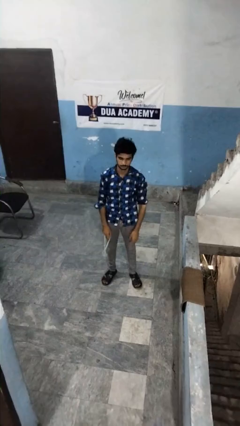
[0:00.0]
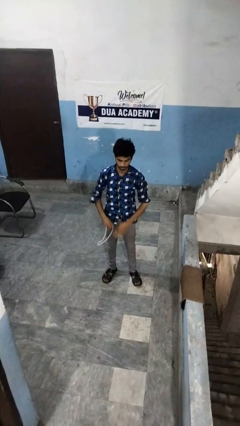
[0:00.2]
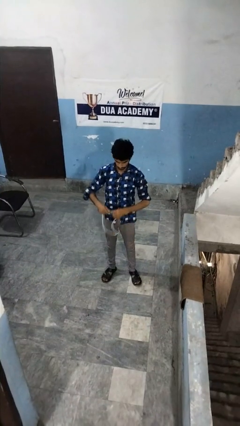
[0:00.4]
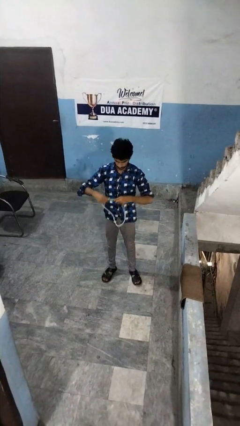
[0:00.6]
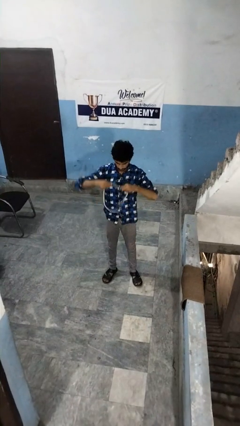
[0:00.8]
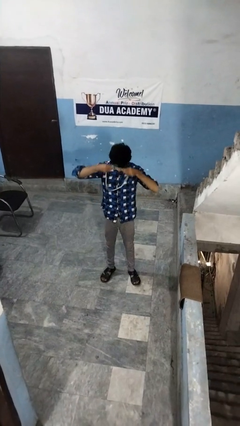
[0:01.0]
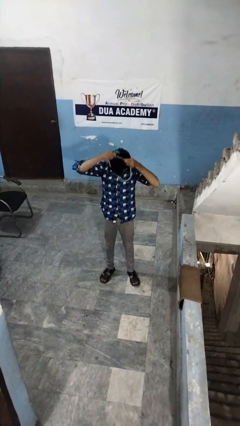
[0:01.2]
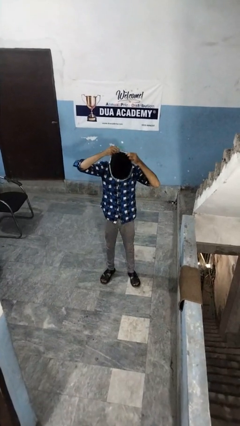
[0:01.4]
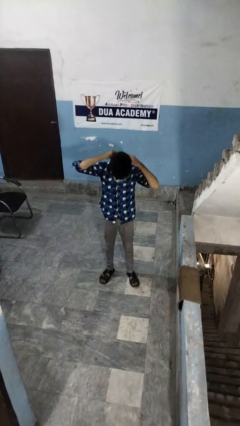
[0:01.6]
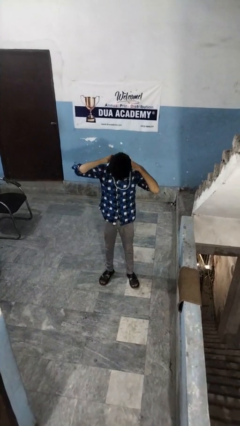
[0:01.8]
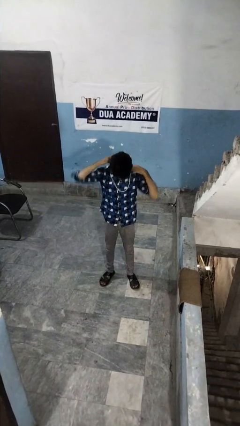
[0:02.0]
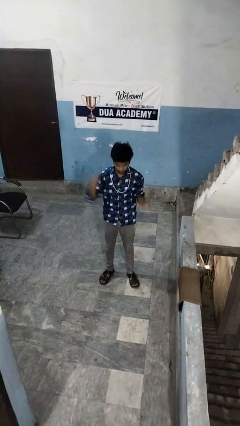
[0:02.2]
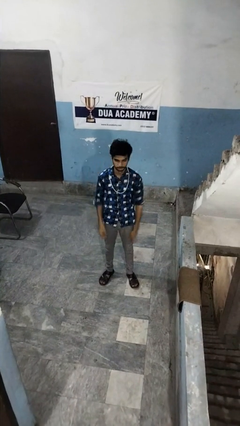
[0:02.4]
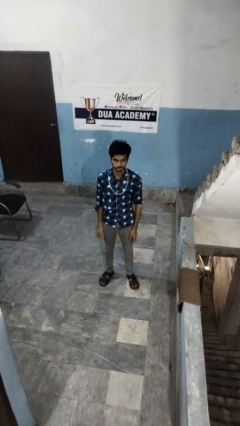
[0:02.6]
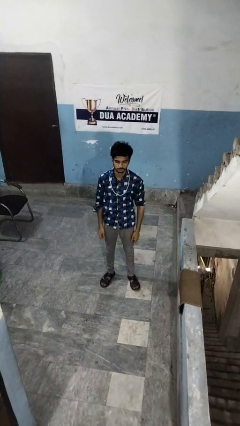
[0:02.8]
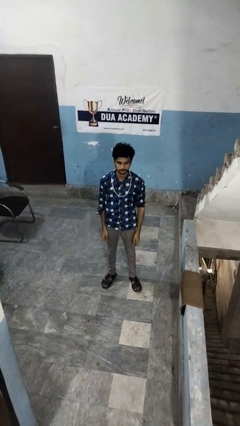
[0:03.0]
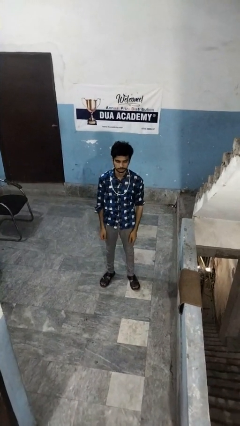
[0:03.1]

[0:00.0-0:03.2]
person puts on necklace

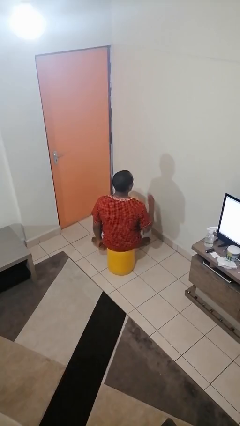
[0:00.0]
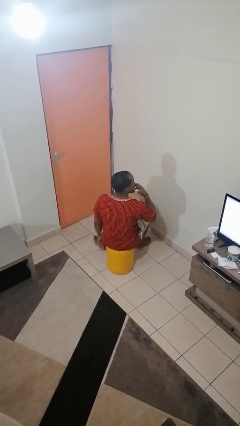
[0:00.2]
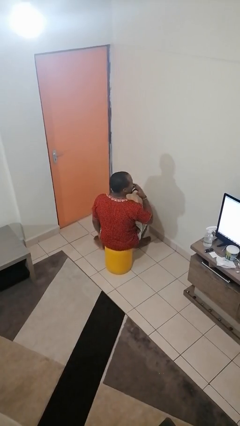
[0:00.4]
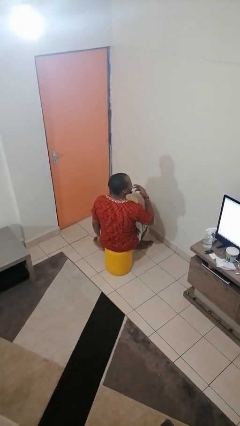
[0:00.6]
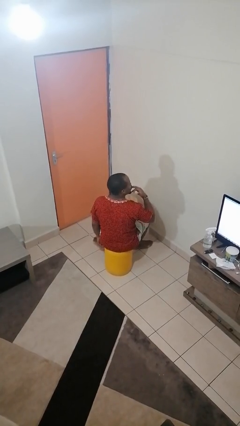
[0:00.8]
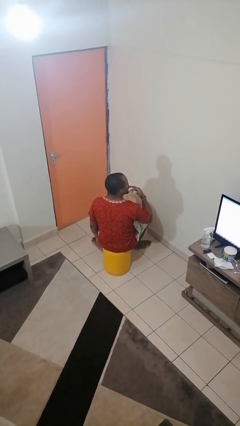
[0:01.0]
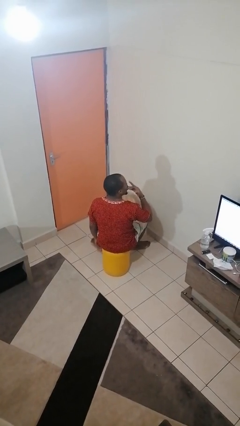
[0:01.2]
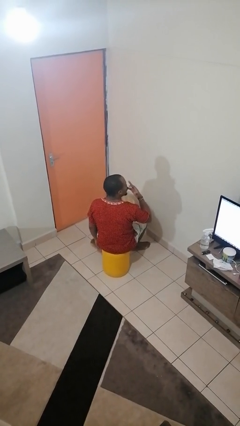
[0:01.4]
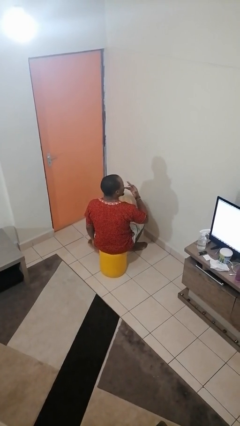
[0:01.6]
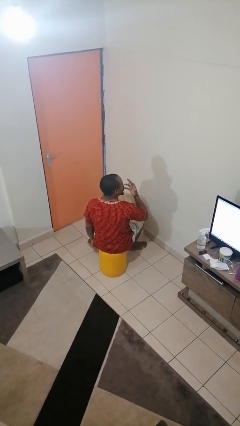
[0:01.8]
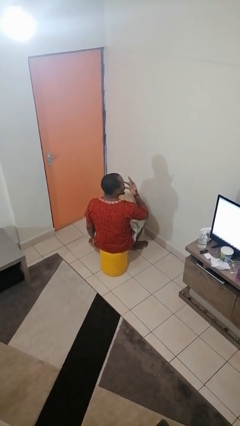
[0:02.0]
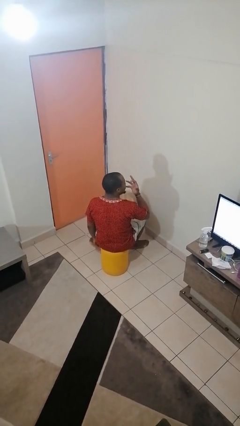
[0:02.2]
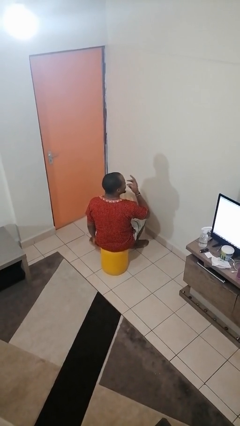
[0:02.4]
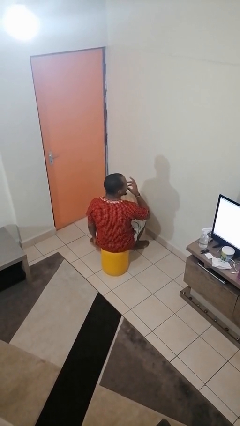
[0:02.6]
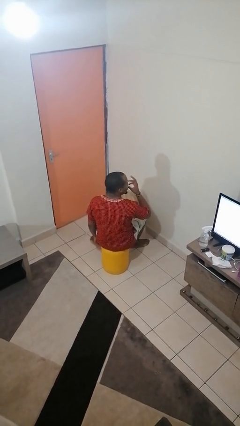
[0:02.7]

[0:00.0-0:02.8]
person licks fingers

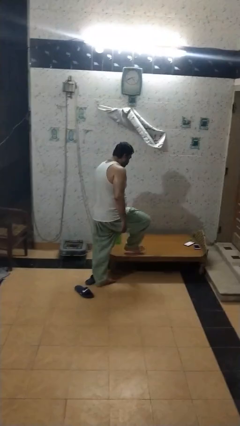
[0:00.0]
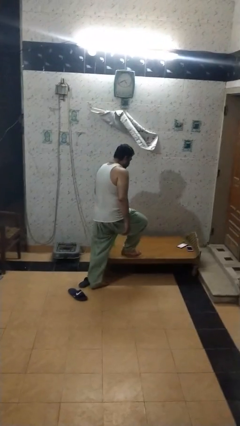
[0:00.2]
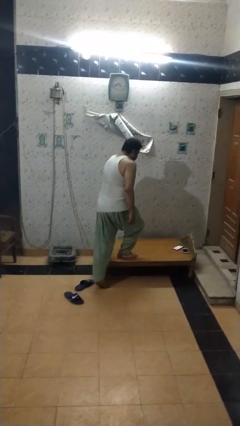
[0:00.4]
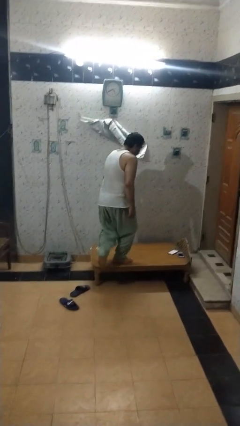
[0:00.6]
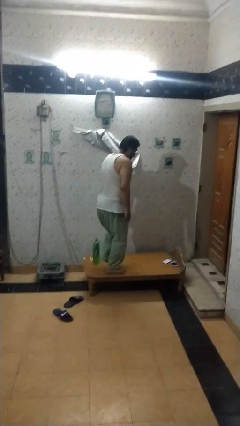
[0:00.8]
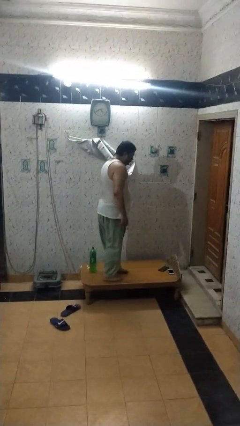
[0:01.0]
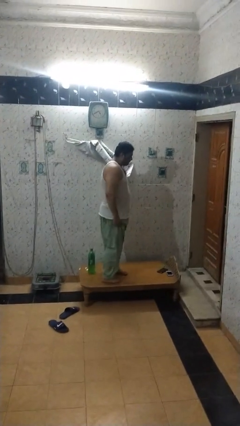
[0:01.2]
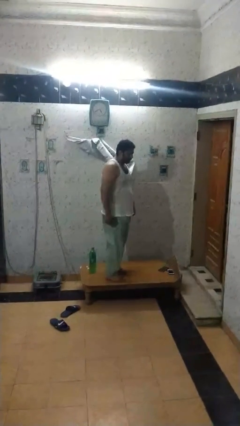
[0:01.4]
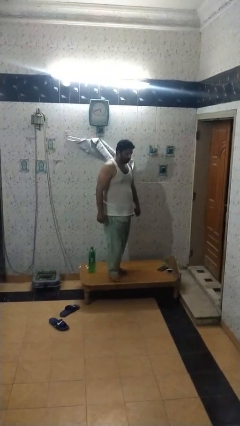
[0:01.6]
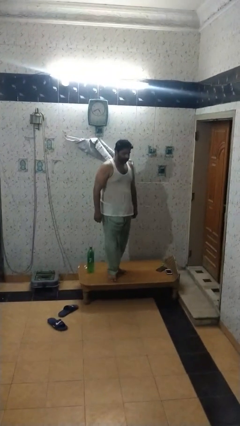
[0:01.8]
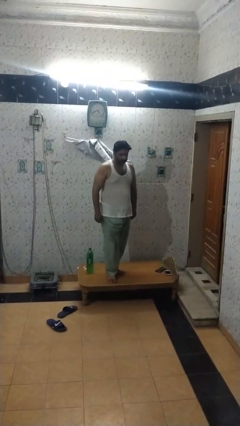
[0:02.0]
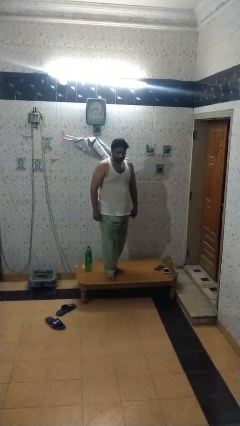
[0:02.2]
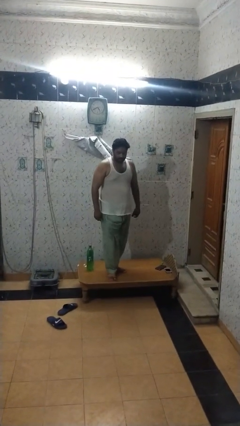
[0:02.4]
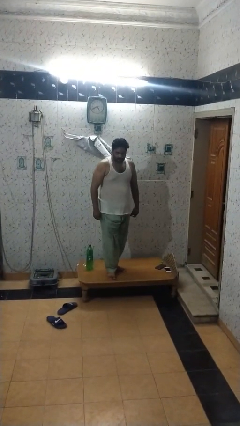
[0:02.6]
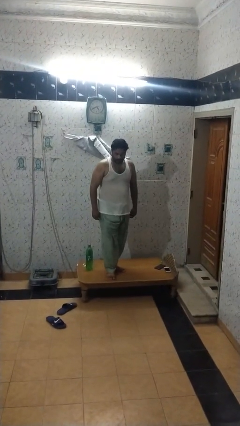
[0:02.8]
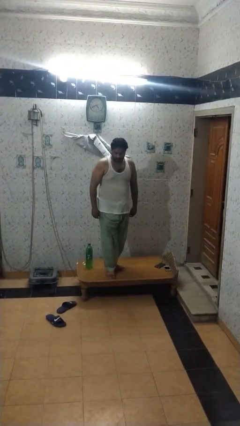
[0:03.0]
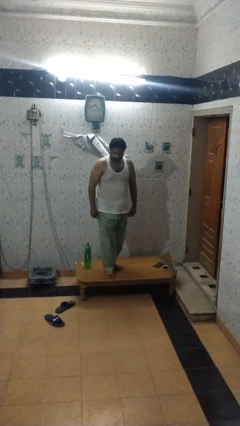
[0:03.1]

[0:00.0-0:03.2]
person climbs on table

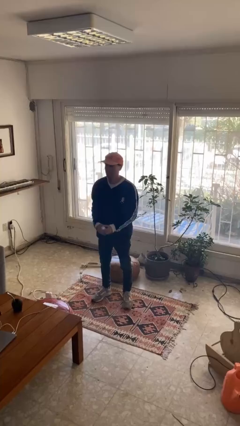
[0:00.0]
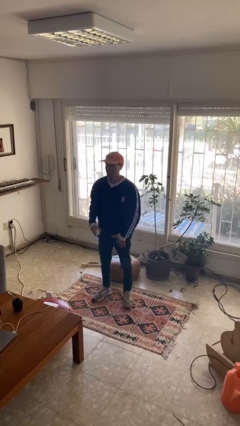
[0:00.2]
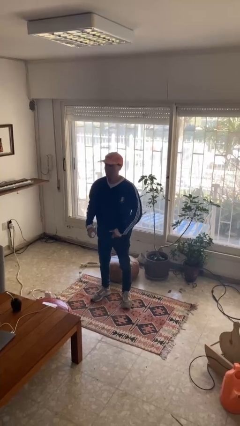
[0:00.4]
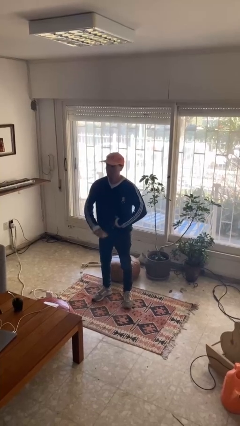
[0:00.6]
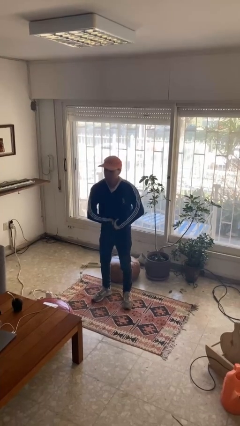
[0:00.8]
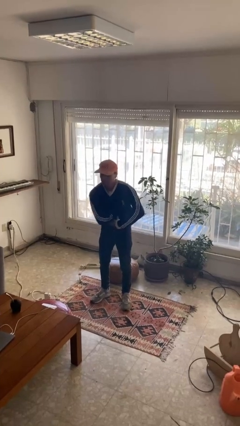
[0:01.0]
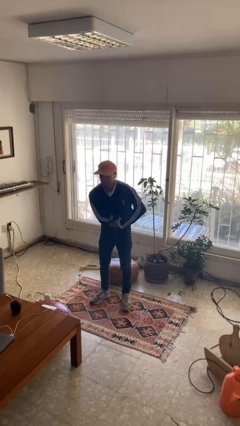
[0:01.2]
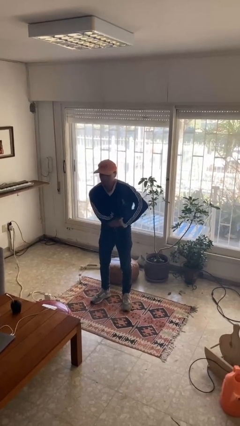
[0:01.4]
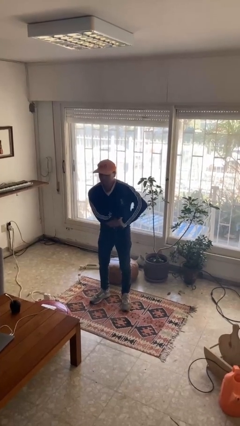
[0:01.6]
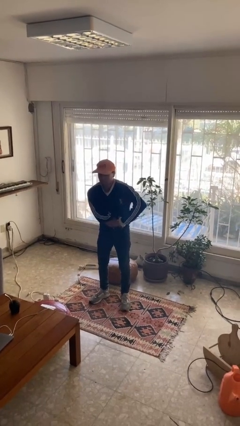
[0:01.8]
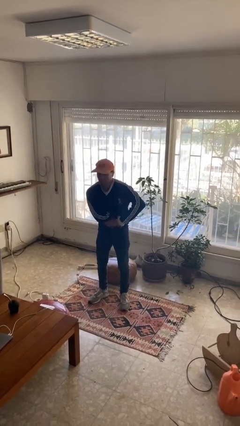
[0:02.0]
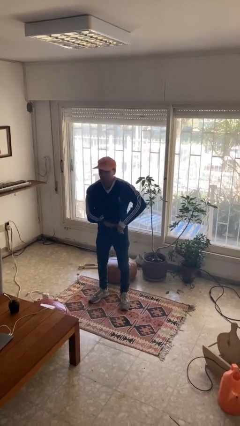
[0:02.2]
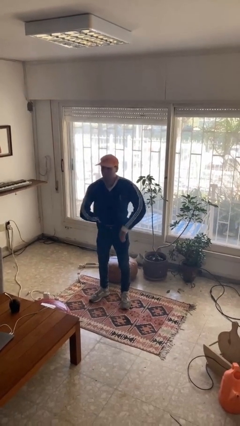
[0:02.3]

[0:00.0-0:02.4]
person applies deodorant

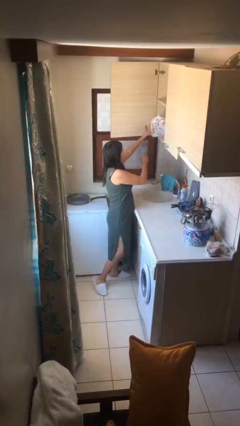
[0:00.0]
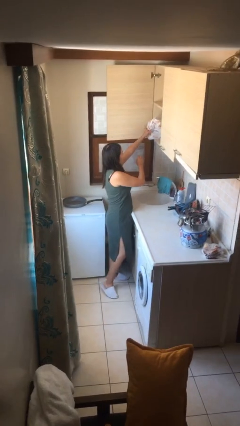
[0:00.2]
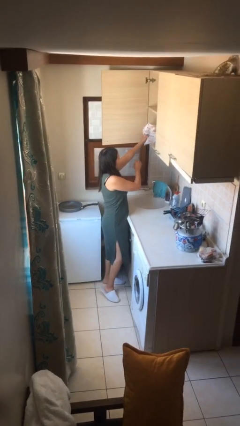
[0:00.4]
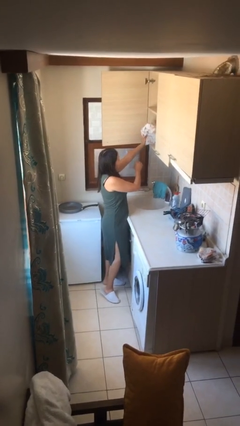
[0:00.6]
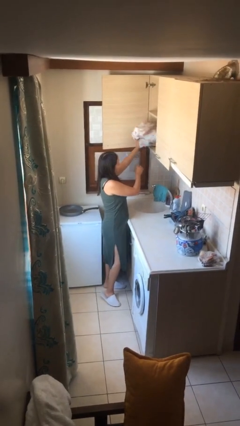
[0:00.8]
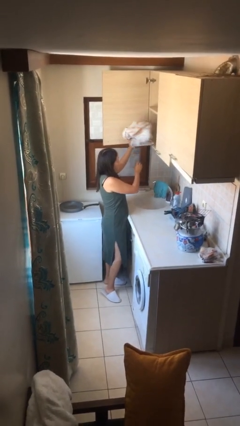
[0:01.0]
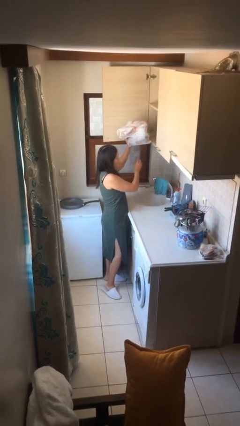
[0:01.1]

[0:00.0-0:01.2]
person picks up object from shelf

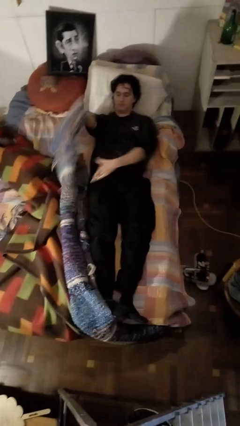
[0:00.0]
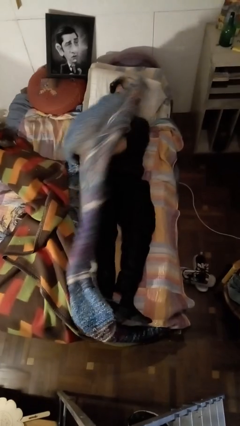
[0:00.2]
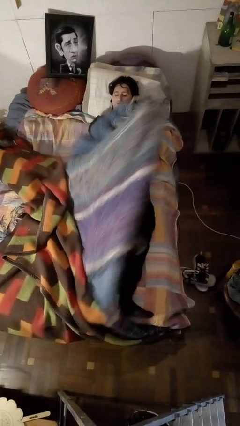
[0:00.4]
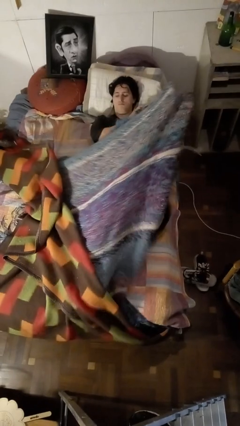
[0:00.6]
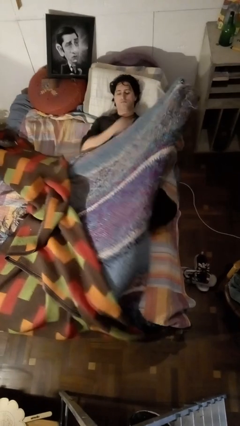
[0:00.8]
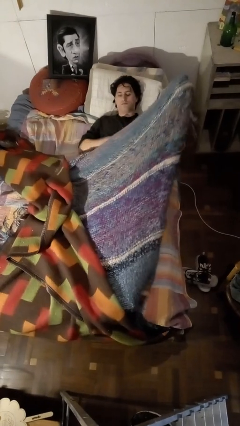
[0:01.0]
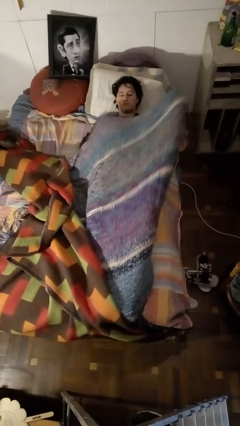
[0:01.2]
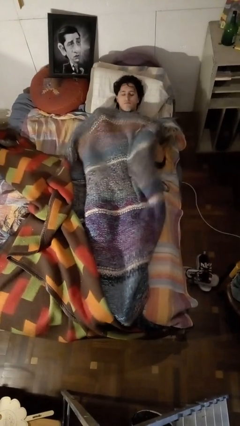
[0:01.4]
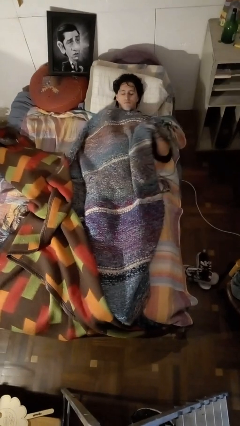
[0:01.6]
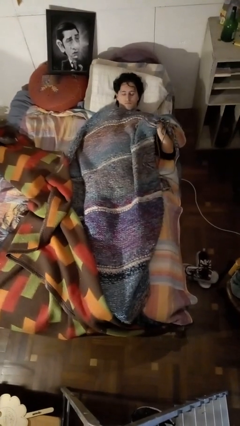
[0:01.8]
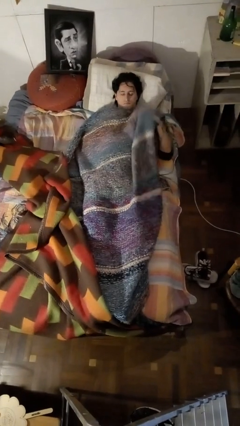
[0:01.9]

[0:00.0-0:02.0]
person covers with bedsheets

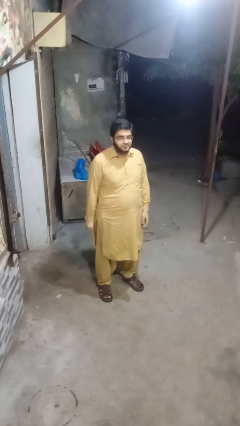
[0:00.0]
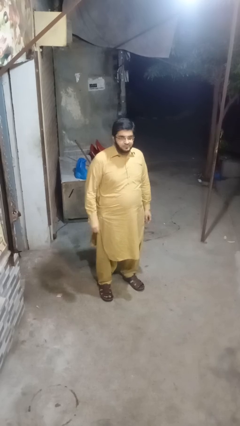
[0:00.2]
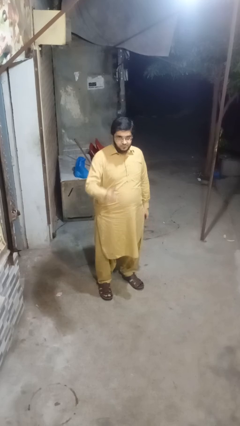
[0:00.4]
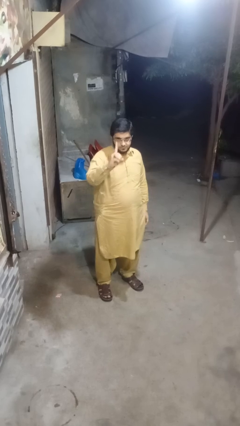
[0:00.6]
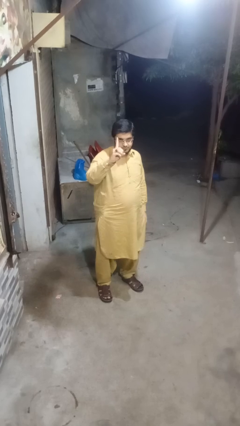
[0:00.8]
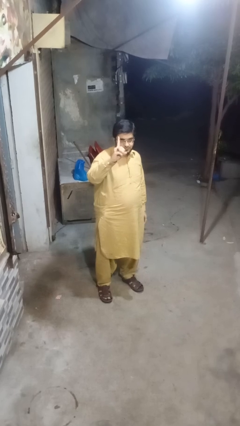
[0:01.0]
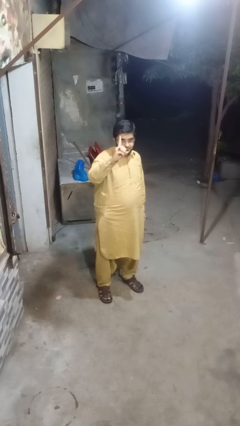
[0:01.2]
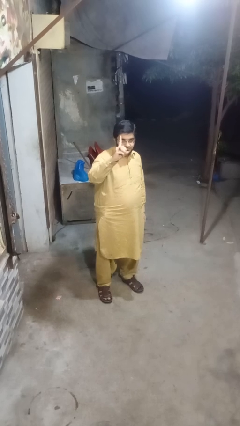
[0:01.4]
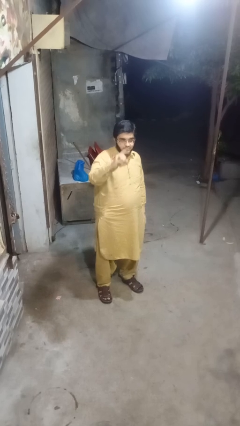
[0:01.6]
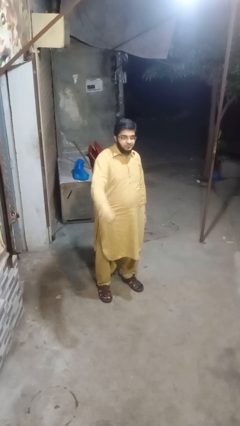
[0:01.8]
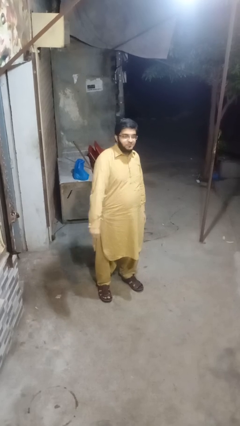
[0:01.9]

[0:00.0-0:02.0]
person gestures number one

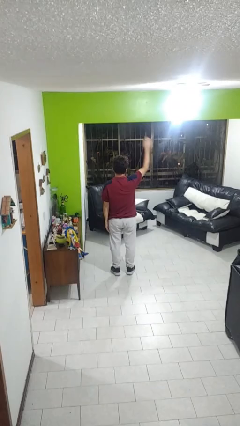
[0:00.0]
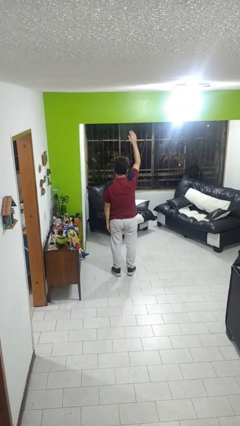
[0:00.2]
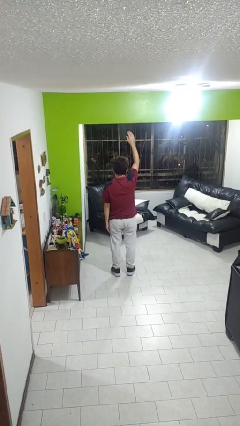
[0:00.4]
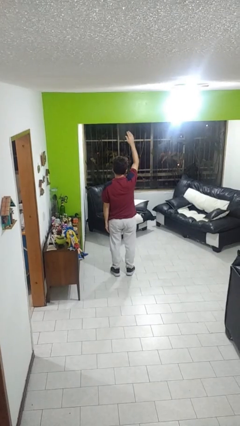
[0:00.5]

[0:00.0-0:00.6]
person gestures raise hand
